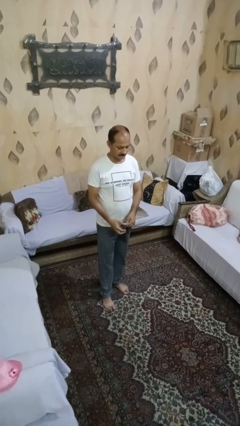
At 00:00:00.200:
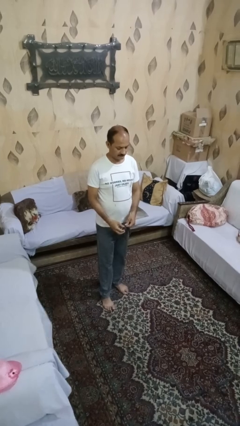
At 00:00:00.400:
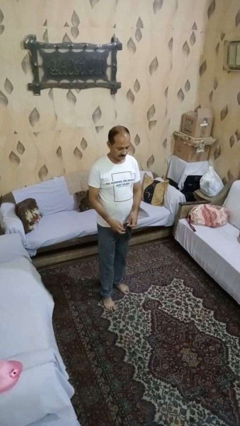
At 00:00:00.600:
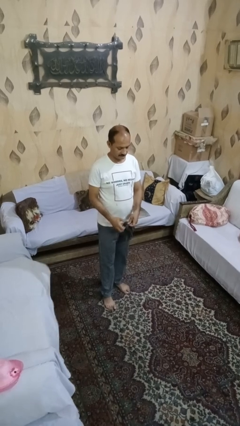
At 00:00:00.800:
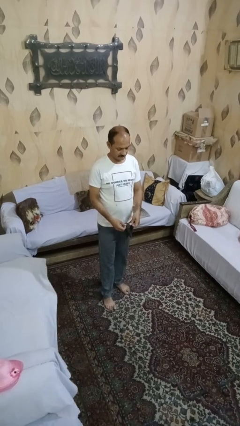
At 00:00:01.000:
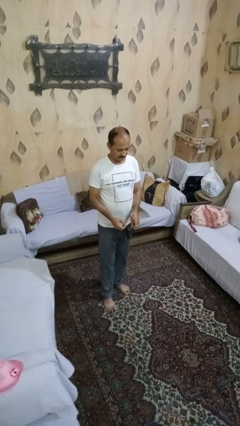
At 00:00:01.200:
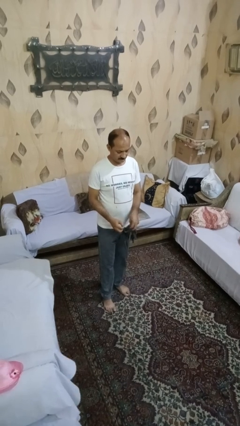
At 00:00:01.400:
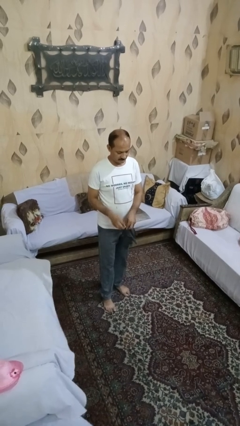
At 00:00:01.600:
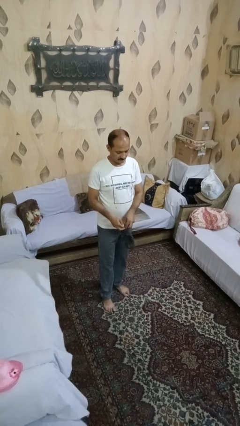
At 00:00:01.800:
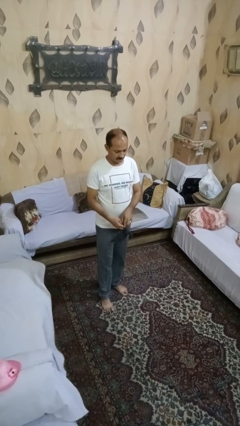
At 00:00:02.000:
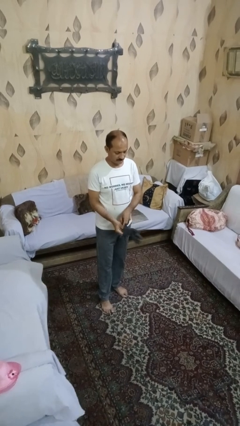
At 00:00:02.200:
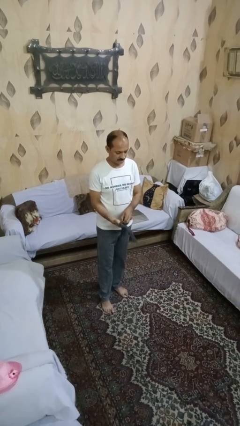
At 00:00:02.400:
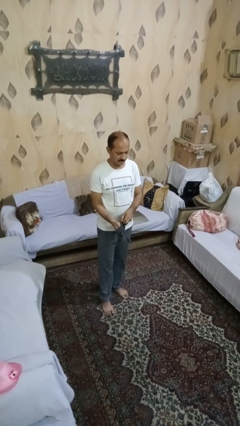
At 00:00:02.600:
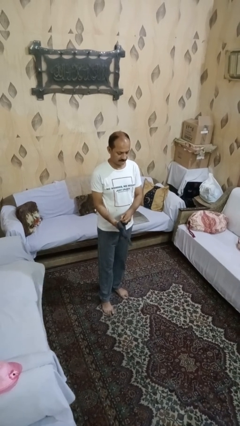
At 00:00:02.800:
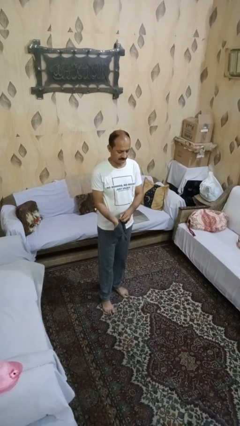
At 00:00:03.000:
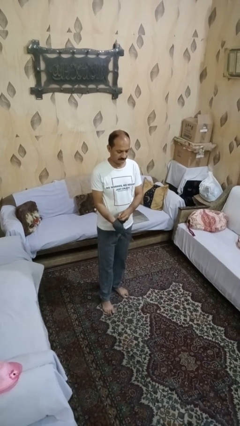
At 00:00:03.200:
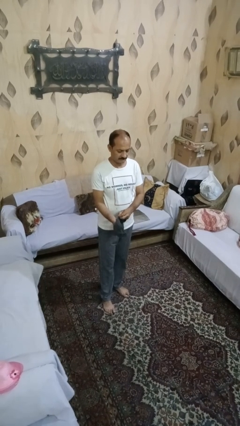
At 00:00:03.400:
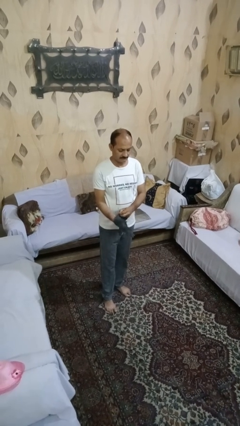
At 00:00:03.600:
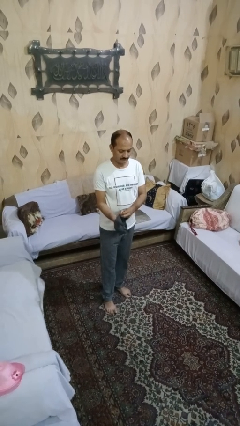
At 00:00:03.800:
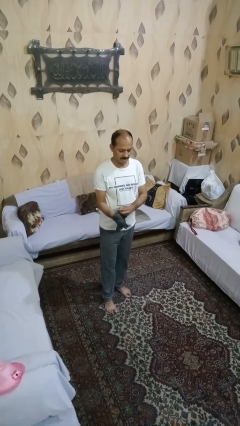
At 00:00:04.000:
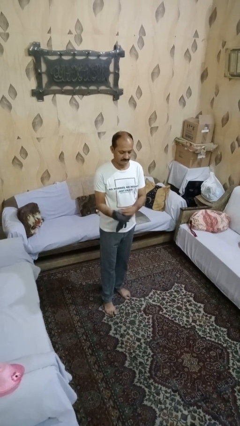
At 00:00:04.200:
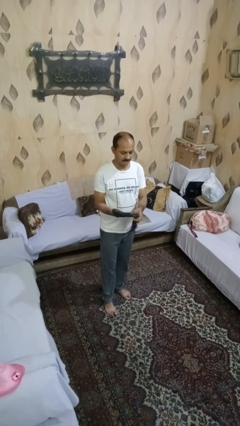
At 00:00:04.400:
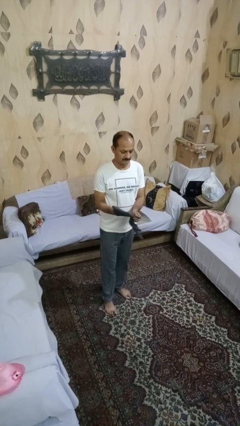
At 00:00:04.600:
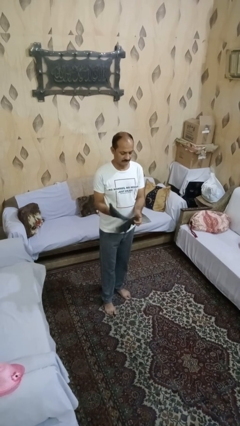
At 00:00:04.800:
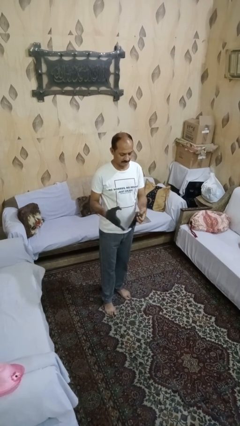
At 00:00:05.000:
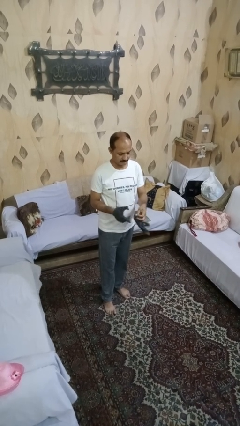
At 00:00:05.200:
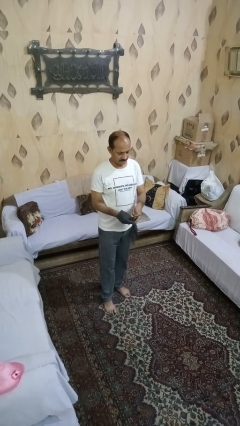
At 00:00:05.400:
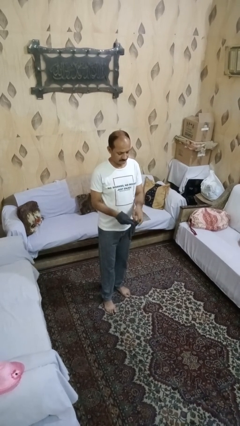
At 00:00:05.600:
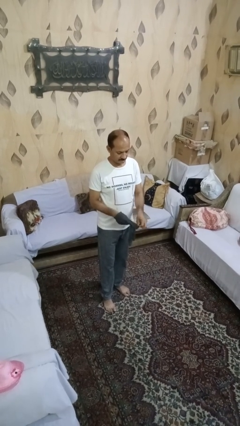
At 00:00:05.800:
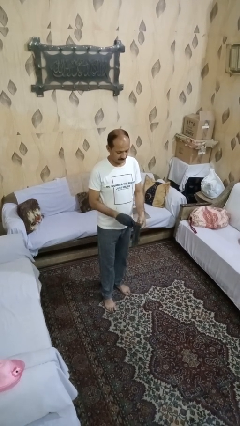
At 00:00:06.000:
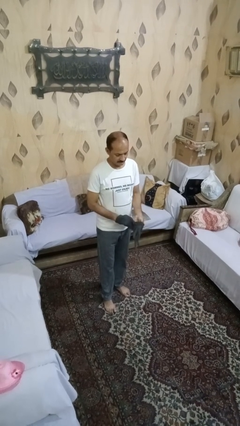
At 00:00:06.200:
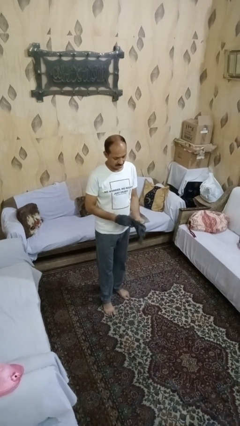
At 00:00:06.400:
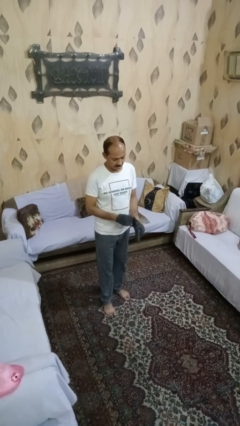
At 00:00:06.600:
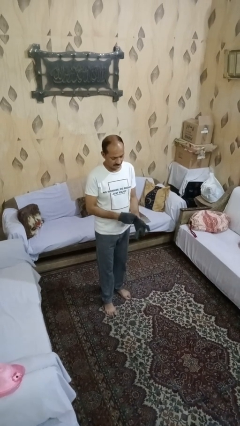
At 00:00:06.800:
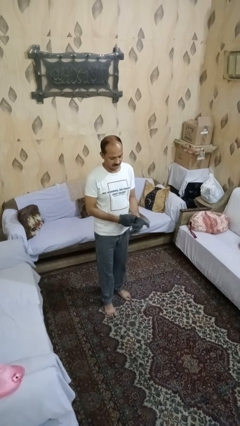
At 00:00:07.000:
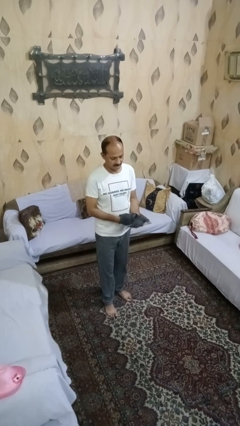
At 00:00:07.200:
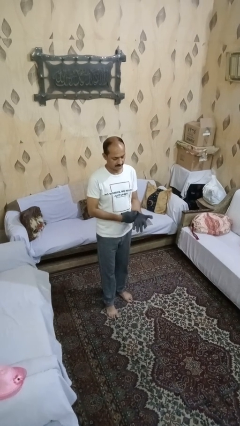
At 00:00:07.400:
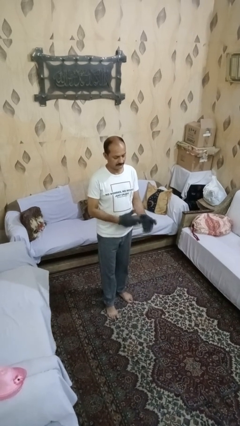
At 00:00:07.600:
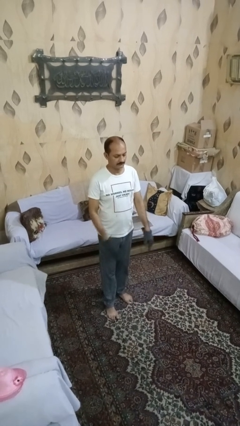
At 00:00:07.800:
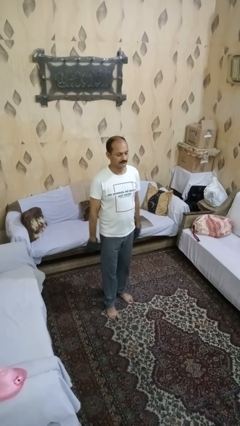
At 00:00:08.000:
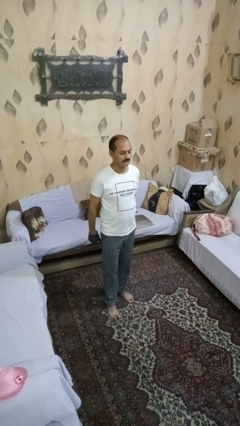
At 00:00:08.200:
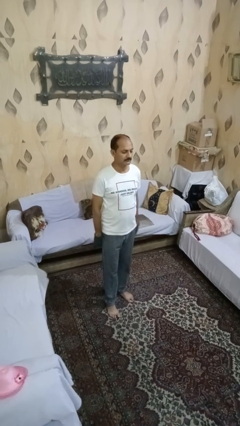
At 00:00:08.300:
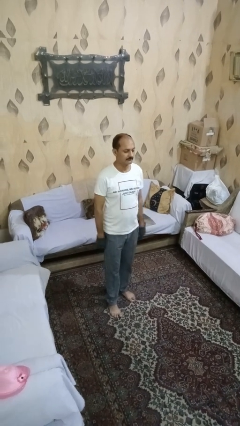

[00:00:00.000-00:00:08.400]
person puts on gloves

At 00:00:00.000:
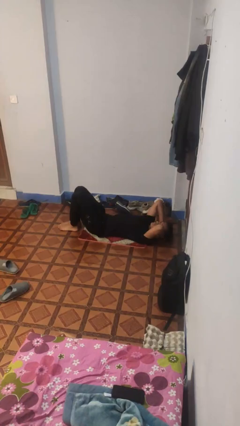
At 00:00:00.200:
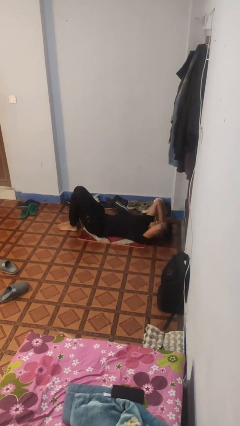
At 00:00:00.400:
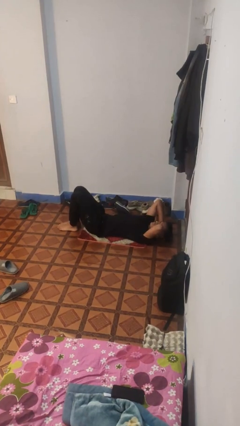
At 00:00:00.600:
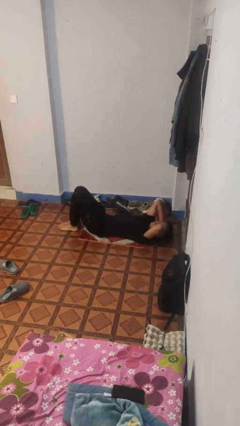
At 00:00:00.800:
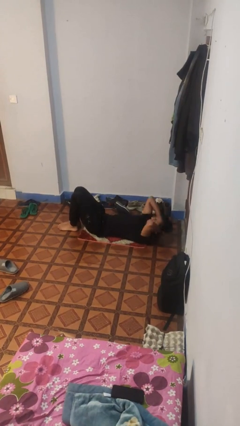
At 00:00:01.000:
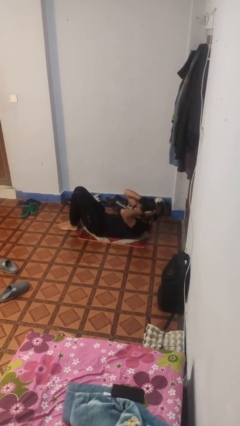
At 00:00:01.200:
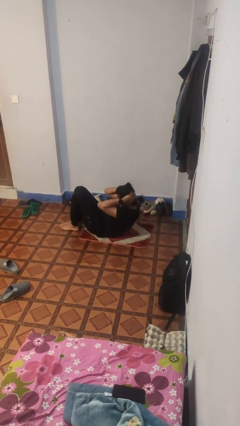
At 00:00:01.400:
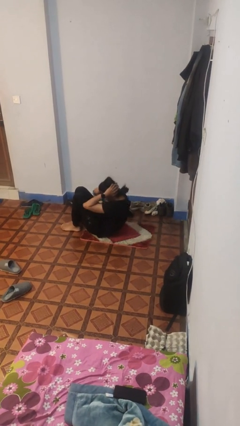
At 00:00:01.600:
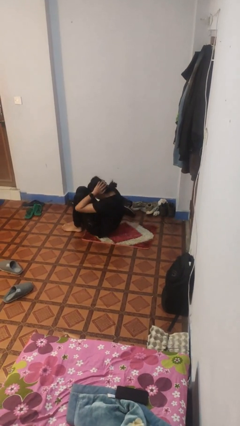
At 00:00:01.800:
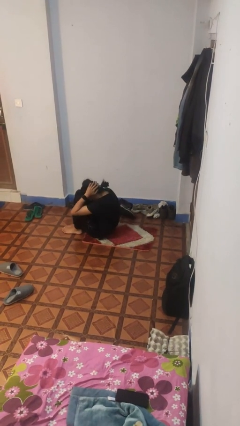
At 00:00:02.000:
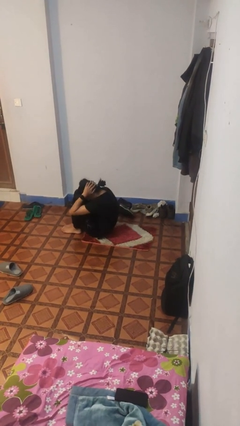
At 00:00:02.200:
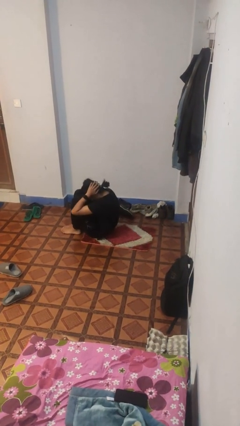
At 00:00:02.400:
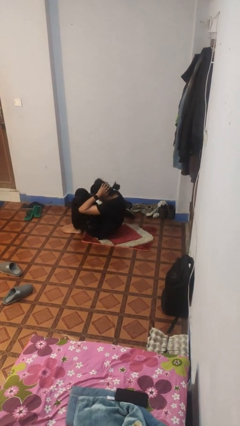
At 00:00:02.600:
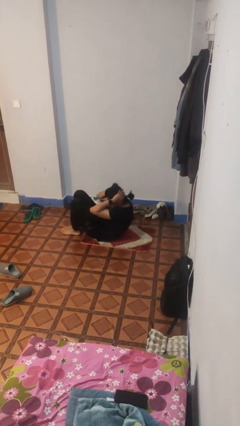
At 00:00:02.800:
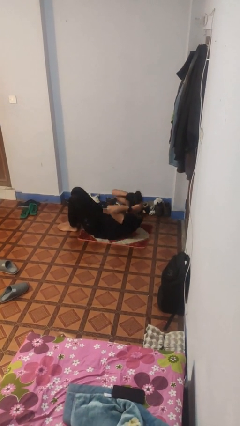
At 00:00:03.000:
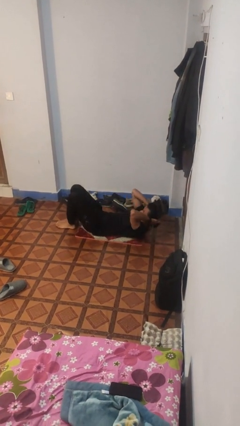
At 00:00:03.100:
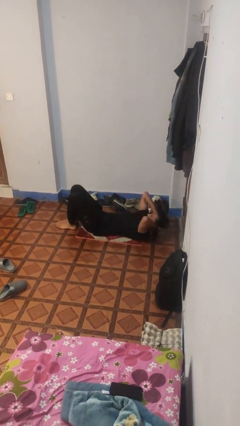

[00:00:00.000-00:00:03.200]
person exercises with situp

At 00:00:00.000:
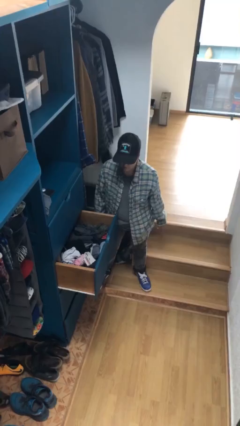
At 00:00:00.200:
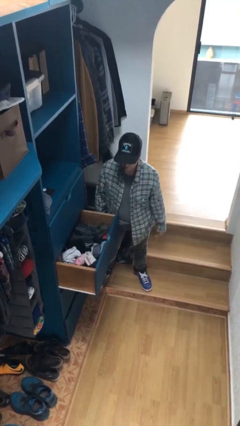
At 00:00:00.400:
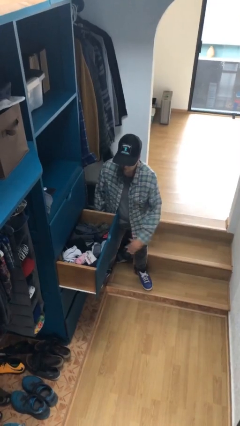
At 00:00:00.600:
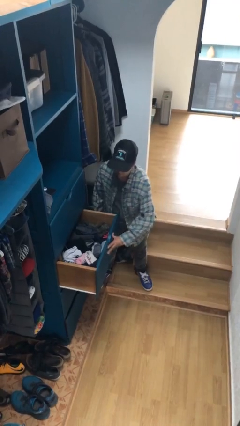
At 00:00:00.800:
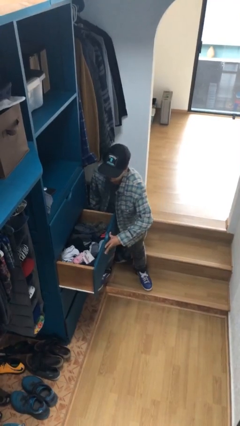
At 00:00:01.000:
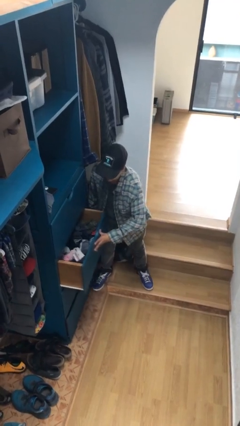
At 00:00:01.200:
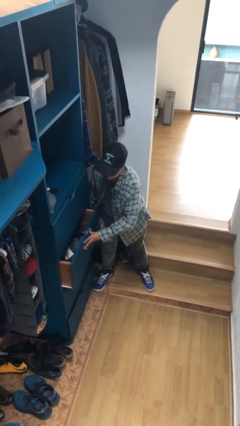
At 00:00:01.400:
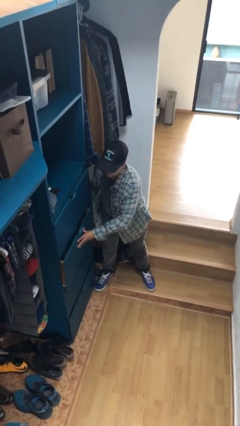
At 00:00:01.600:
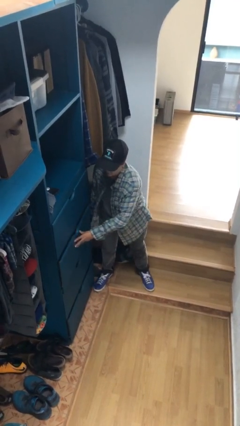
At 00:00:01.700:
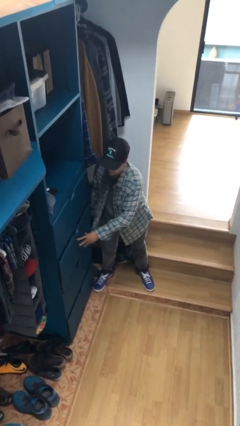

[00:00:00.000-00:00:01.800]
person closes dresser drawer

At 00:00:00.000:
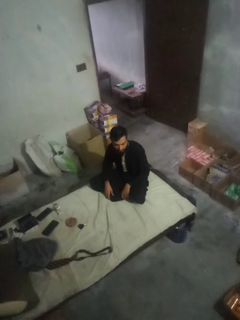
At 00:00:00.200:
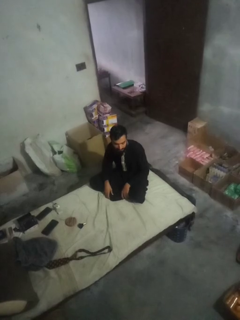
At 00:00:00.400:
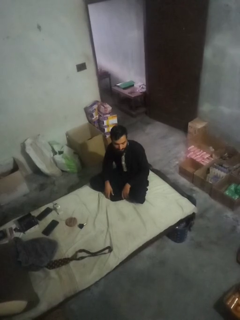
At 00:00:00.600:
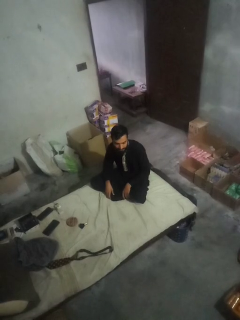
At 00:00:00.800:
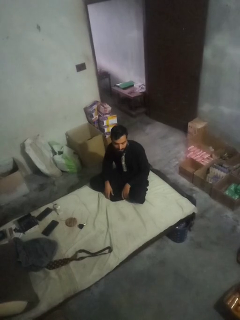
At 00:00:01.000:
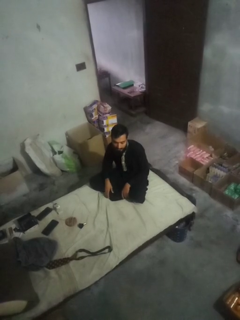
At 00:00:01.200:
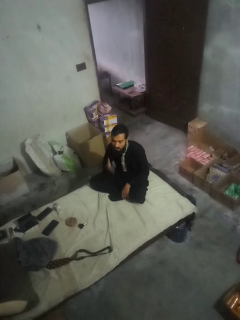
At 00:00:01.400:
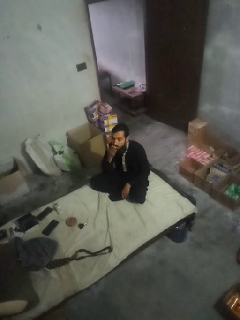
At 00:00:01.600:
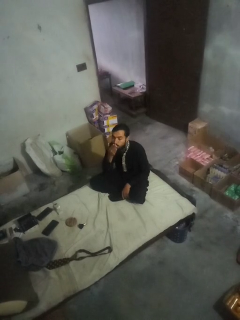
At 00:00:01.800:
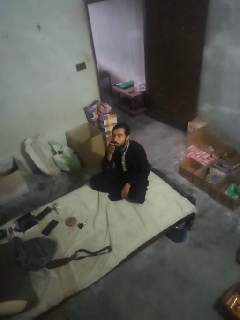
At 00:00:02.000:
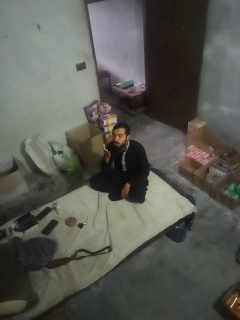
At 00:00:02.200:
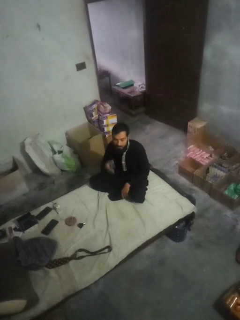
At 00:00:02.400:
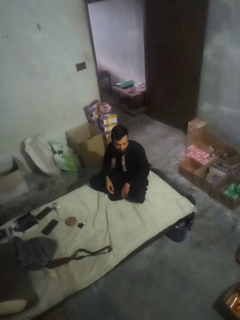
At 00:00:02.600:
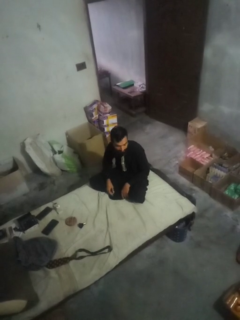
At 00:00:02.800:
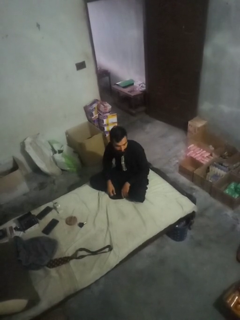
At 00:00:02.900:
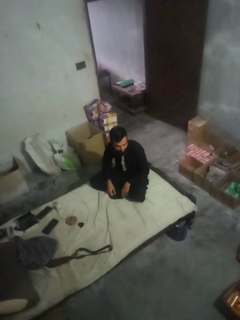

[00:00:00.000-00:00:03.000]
person gestures blow kiss

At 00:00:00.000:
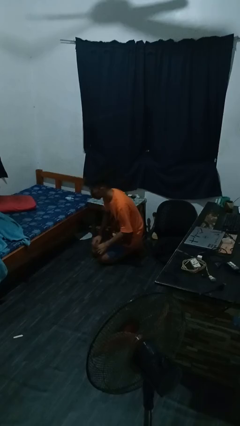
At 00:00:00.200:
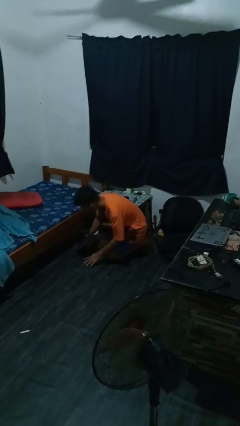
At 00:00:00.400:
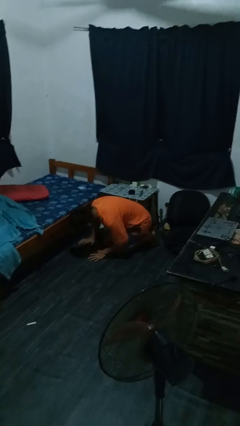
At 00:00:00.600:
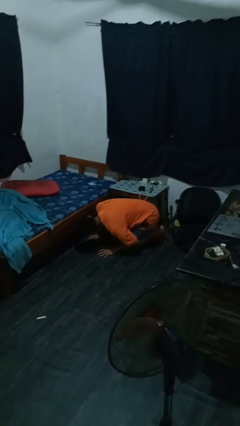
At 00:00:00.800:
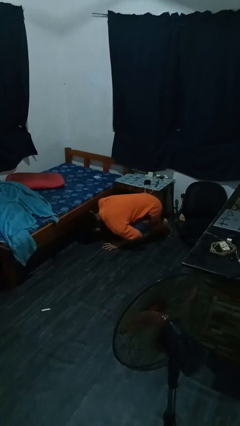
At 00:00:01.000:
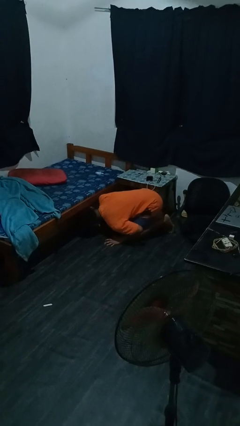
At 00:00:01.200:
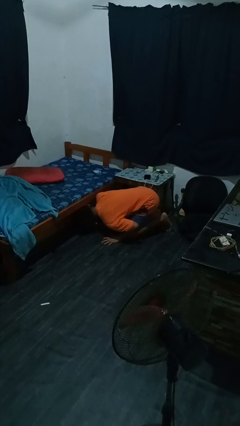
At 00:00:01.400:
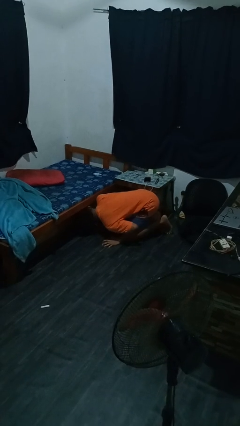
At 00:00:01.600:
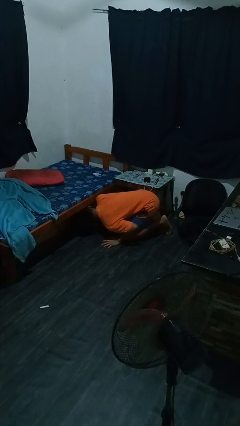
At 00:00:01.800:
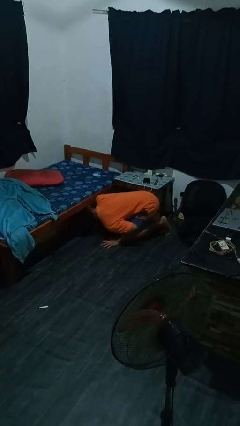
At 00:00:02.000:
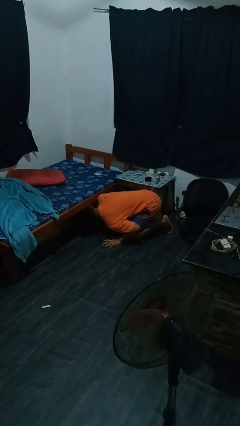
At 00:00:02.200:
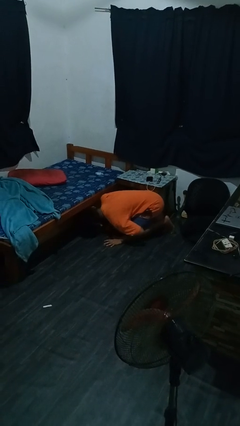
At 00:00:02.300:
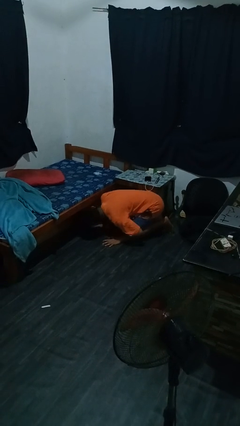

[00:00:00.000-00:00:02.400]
person searches under bed
